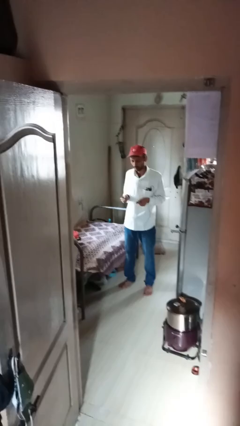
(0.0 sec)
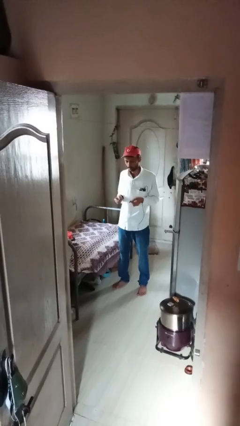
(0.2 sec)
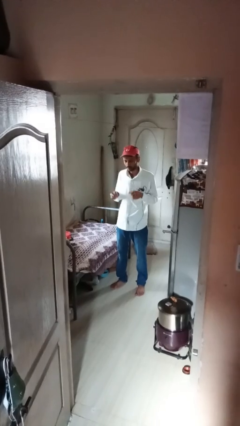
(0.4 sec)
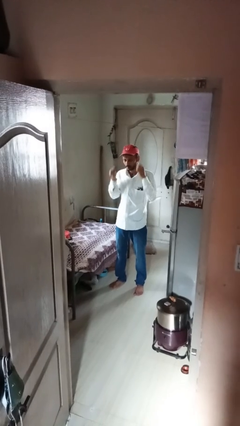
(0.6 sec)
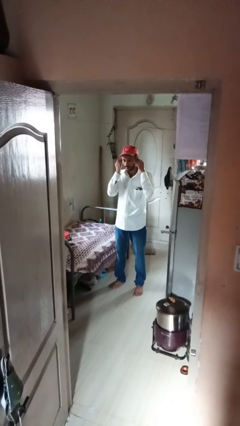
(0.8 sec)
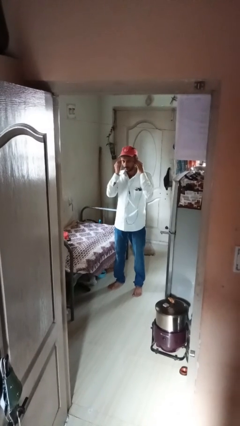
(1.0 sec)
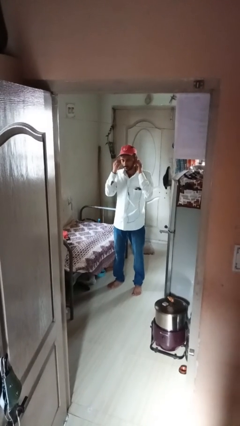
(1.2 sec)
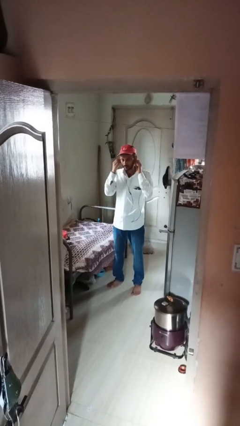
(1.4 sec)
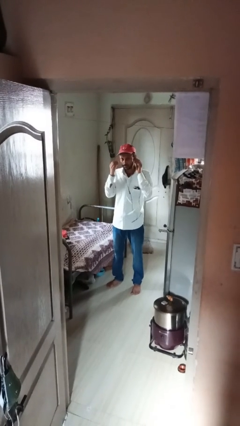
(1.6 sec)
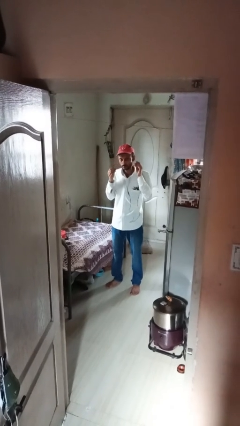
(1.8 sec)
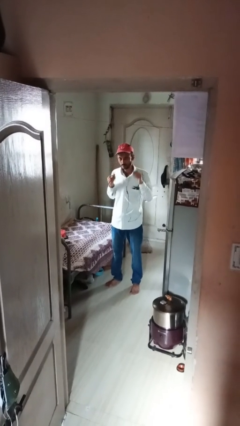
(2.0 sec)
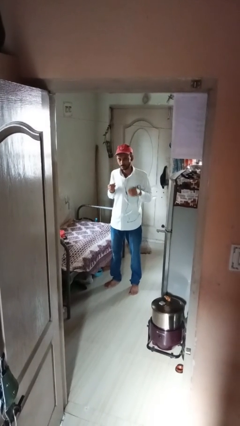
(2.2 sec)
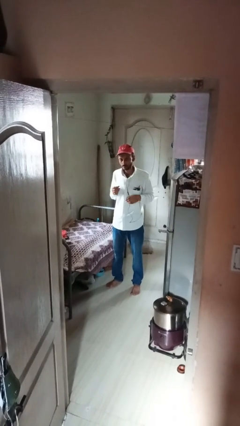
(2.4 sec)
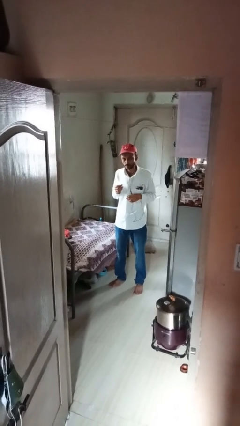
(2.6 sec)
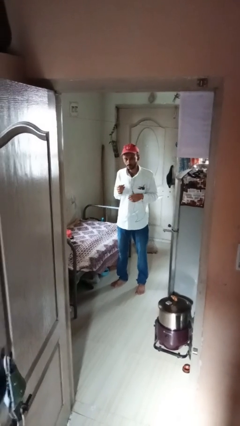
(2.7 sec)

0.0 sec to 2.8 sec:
person puts on headphones

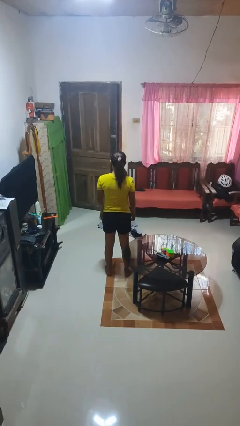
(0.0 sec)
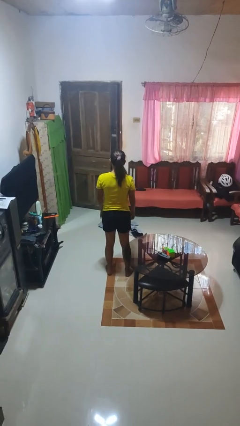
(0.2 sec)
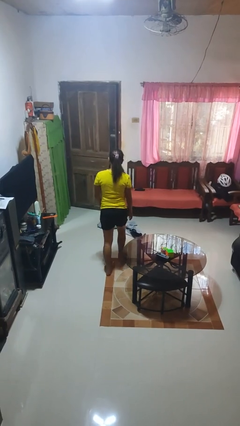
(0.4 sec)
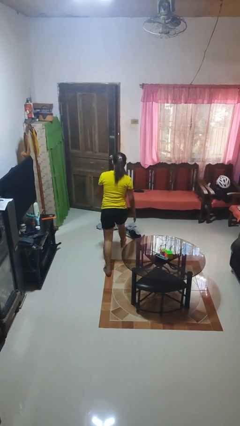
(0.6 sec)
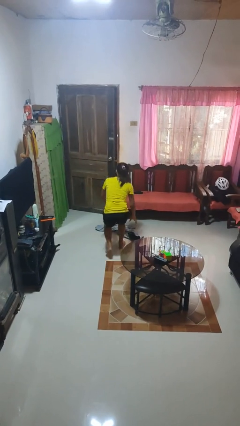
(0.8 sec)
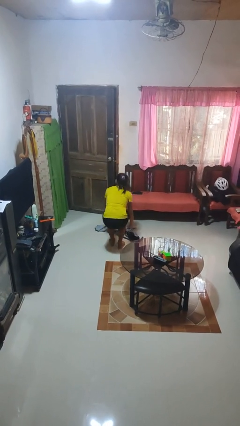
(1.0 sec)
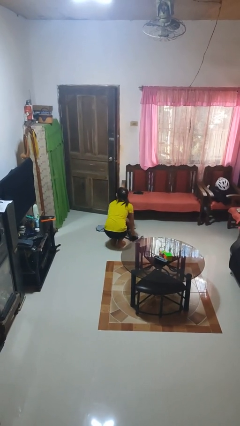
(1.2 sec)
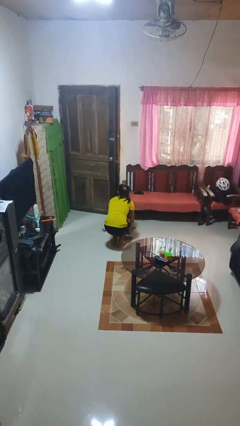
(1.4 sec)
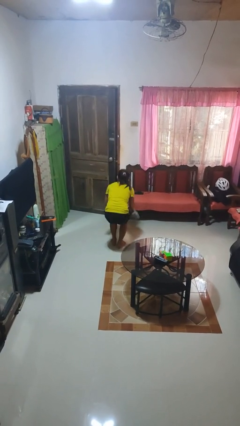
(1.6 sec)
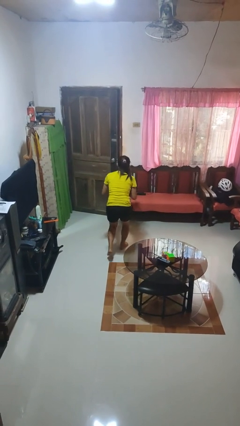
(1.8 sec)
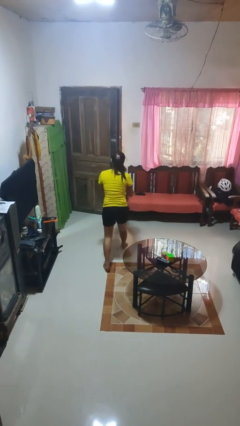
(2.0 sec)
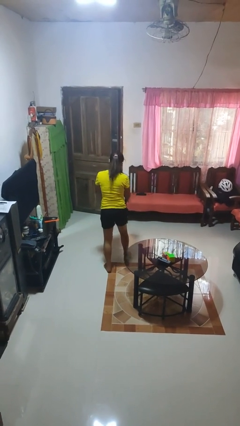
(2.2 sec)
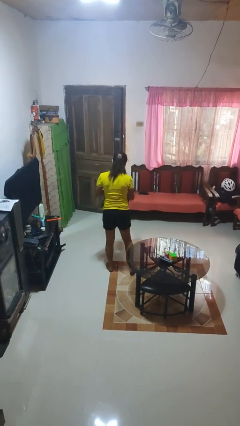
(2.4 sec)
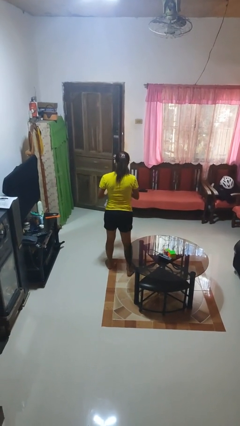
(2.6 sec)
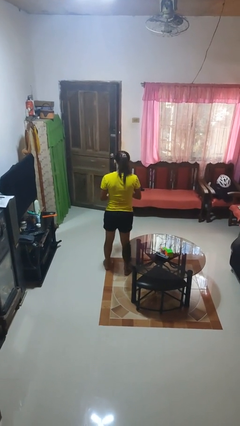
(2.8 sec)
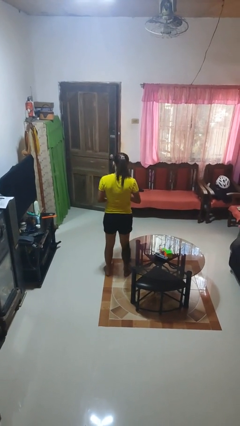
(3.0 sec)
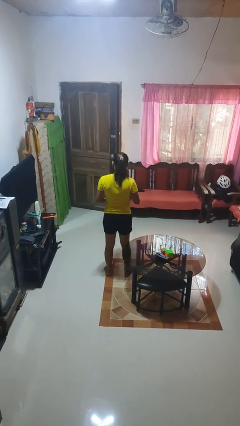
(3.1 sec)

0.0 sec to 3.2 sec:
person picks up object from floor

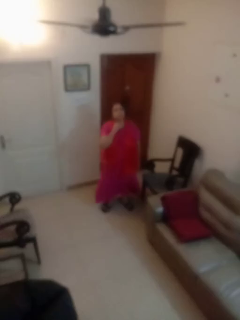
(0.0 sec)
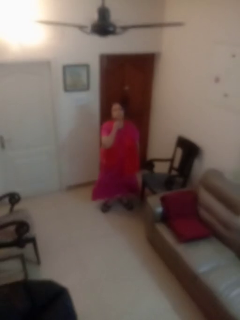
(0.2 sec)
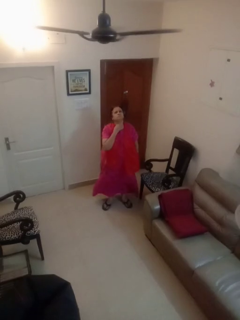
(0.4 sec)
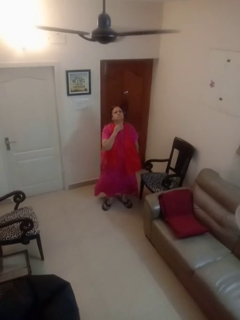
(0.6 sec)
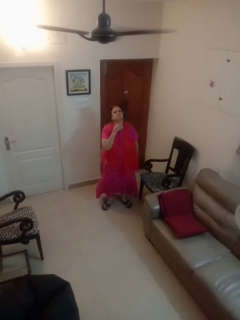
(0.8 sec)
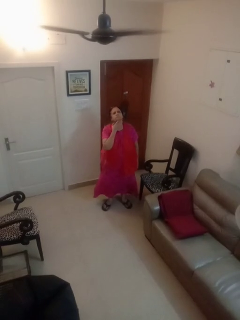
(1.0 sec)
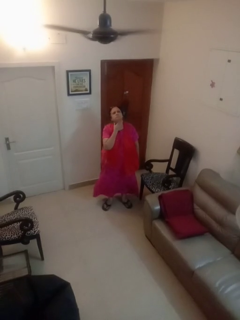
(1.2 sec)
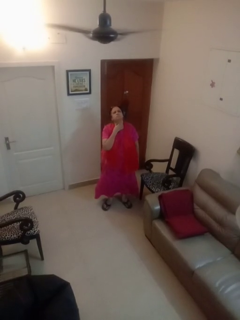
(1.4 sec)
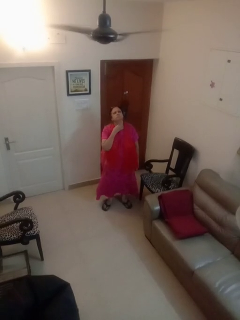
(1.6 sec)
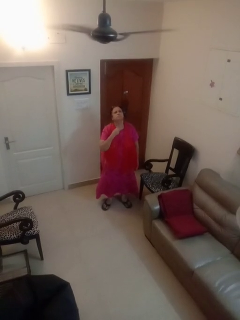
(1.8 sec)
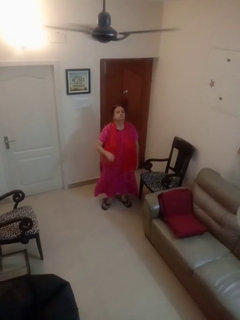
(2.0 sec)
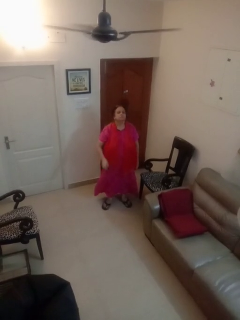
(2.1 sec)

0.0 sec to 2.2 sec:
person rubs neck

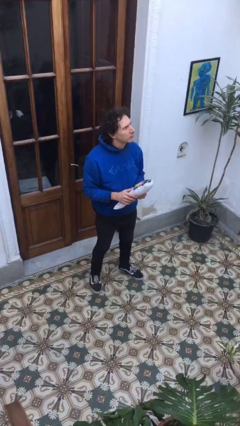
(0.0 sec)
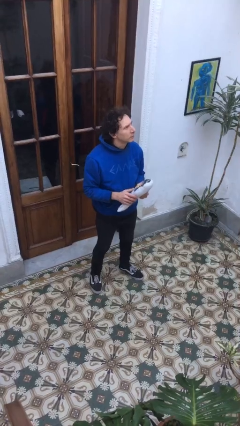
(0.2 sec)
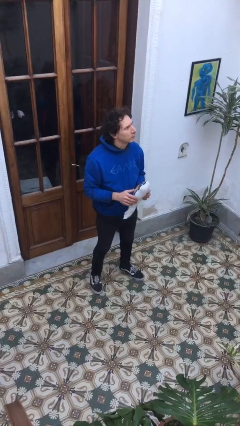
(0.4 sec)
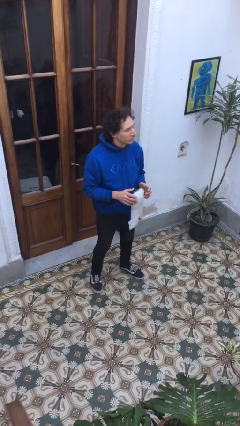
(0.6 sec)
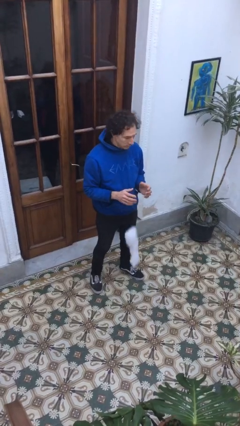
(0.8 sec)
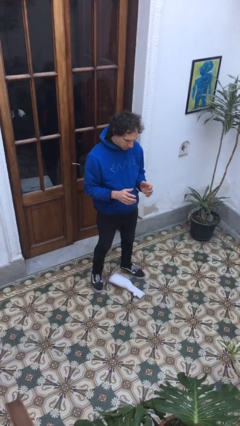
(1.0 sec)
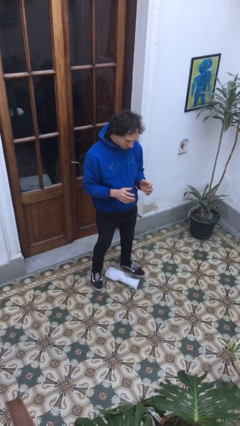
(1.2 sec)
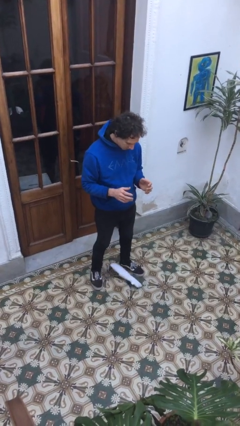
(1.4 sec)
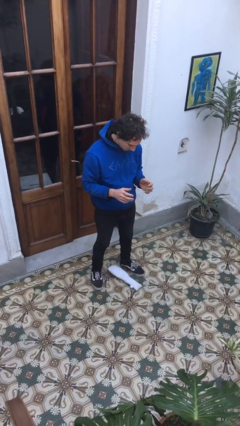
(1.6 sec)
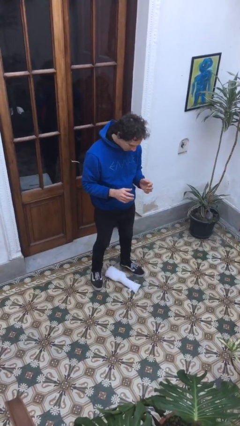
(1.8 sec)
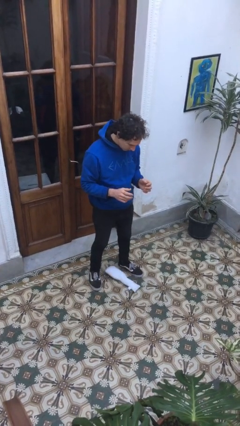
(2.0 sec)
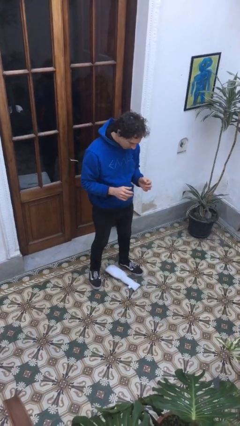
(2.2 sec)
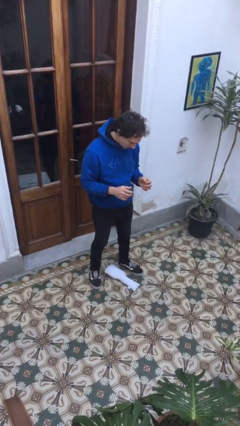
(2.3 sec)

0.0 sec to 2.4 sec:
person drops object

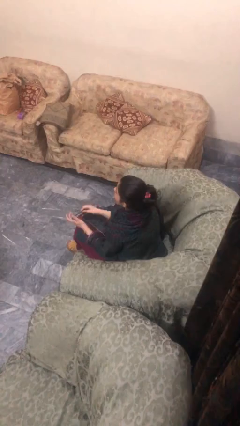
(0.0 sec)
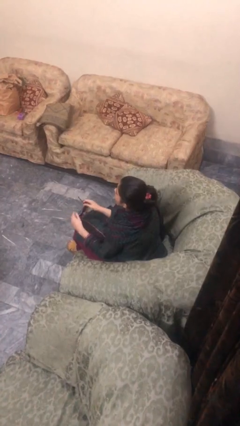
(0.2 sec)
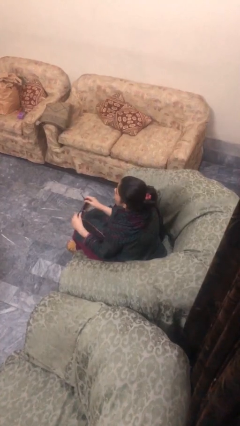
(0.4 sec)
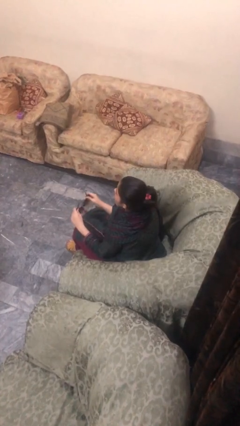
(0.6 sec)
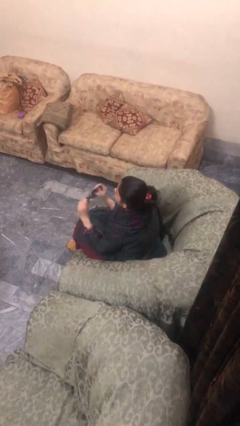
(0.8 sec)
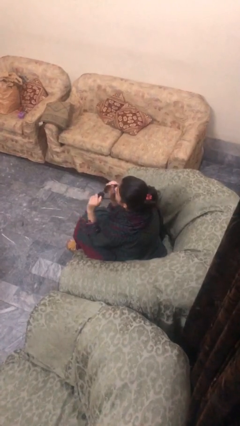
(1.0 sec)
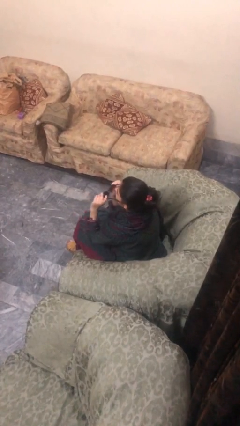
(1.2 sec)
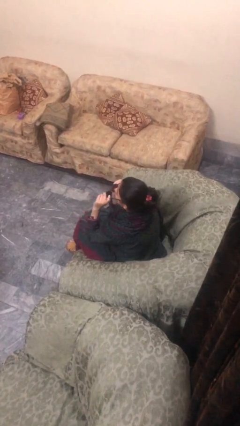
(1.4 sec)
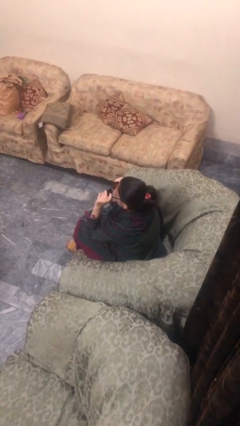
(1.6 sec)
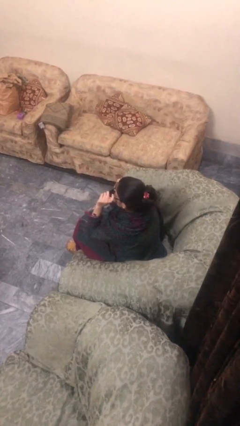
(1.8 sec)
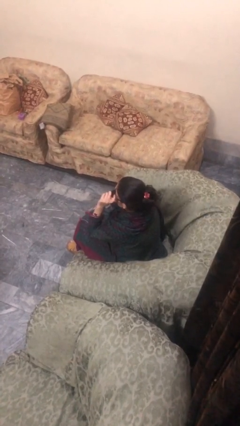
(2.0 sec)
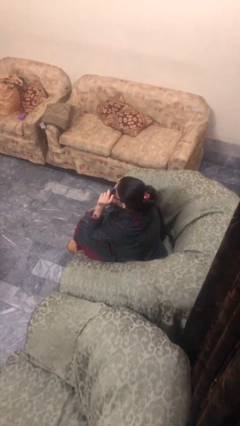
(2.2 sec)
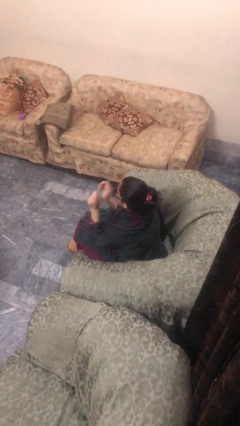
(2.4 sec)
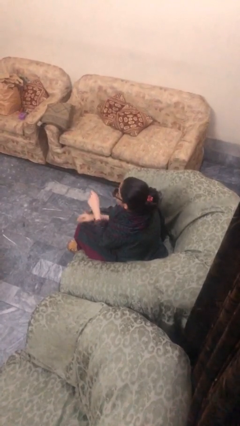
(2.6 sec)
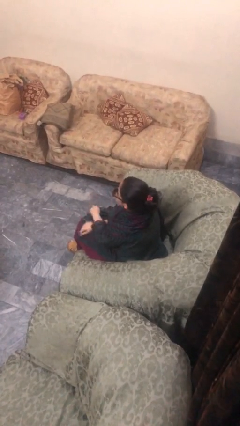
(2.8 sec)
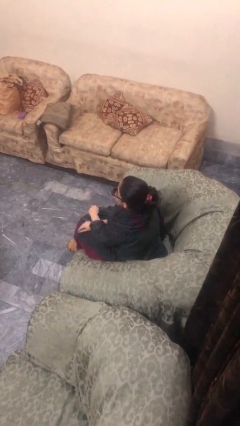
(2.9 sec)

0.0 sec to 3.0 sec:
person puts on sunglasses

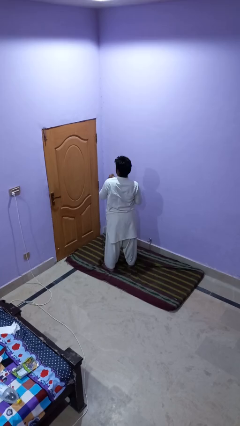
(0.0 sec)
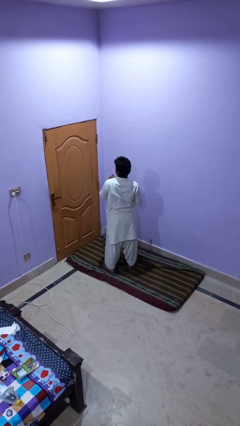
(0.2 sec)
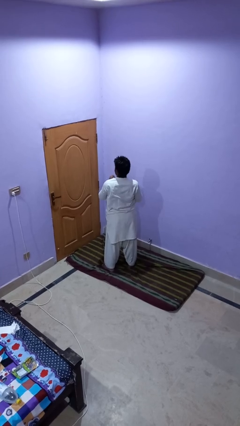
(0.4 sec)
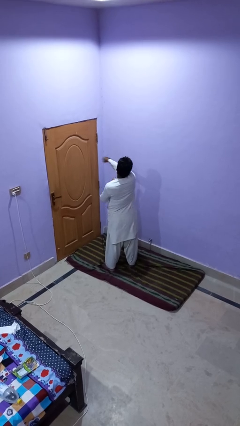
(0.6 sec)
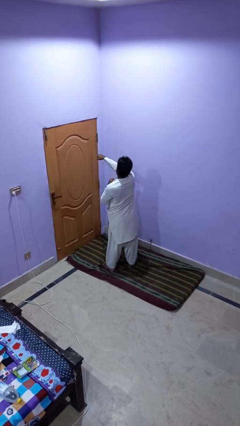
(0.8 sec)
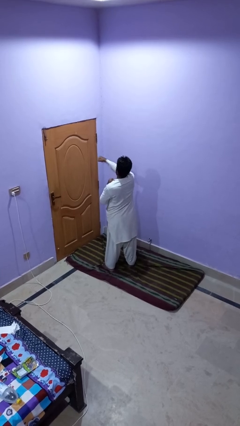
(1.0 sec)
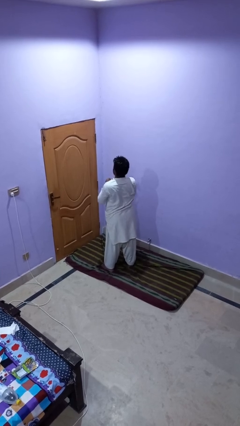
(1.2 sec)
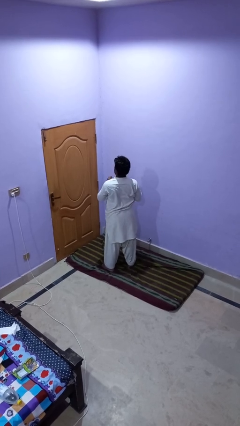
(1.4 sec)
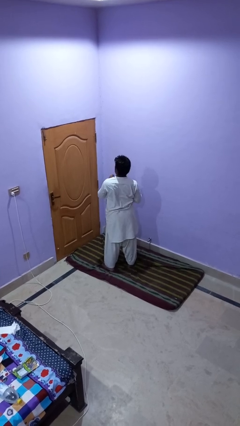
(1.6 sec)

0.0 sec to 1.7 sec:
person punches

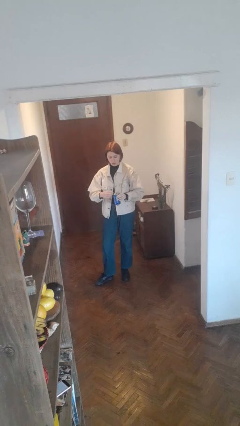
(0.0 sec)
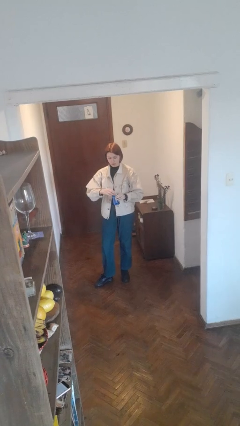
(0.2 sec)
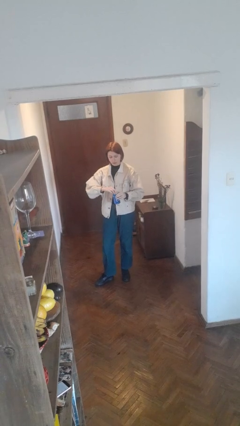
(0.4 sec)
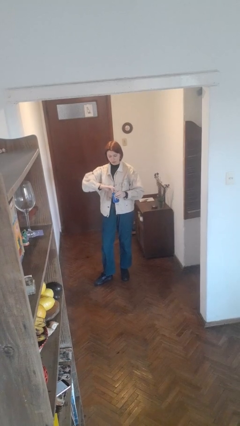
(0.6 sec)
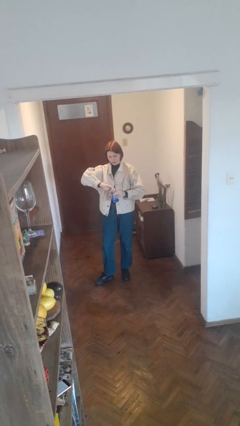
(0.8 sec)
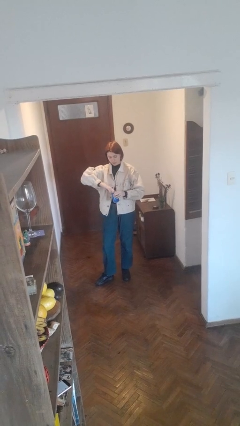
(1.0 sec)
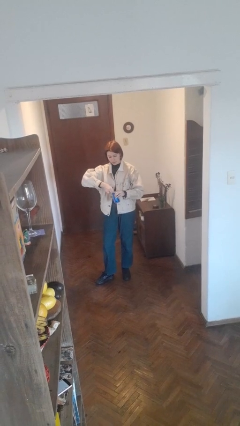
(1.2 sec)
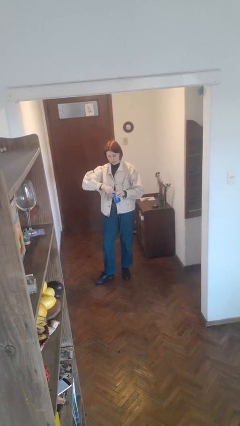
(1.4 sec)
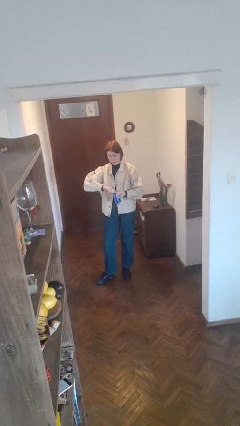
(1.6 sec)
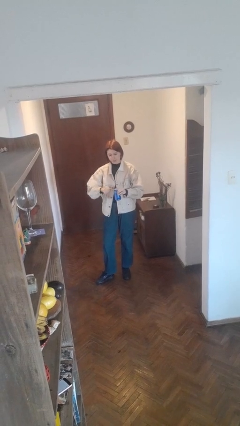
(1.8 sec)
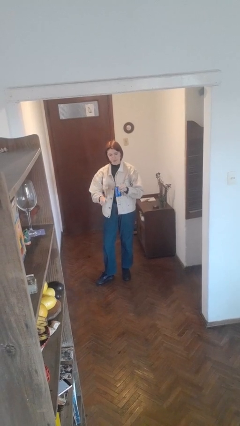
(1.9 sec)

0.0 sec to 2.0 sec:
person opens beverage can
